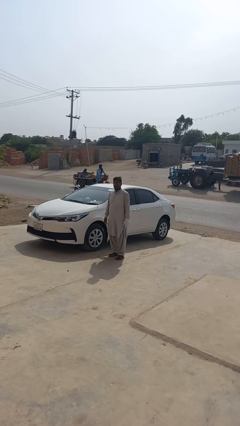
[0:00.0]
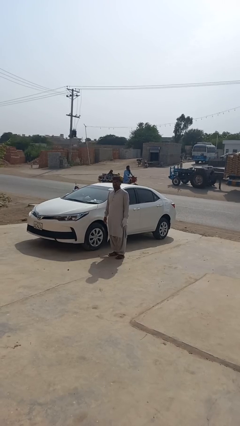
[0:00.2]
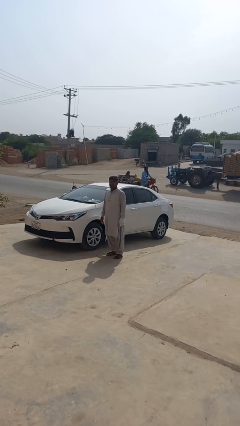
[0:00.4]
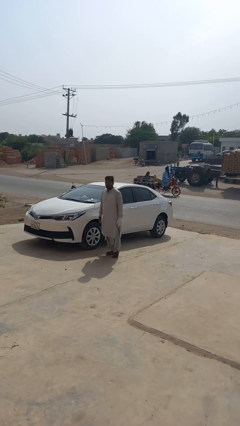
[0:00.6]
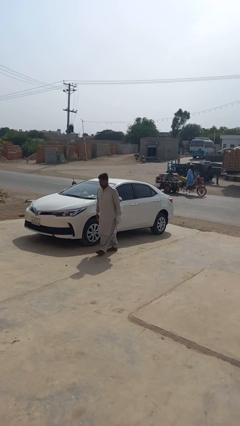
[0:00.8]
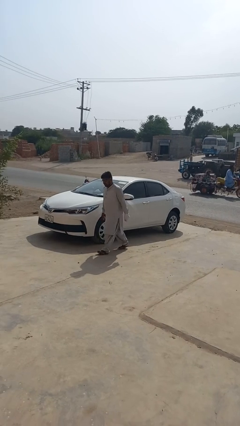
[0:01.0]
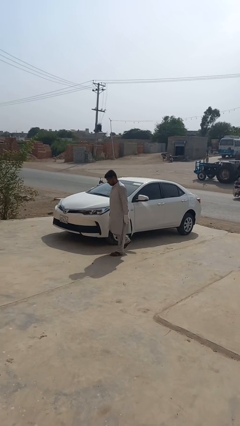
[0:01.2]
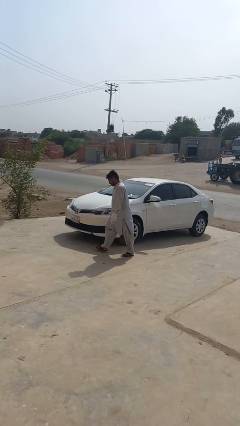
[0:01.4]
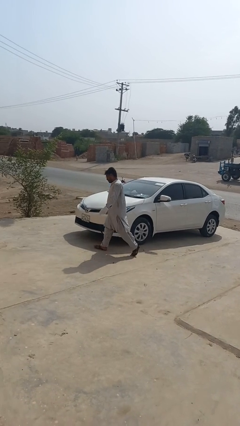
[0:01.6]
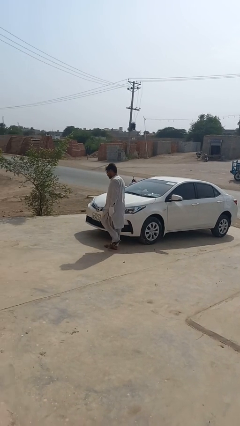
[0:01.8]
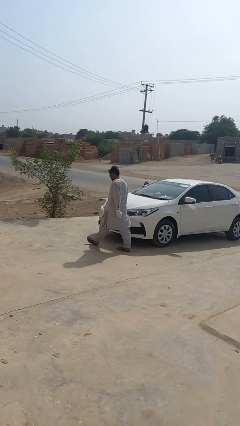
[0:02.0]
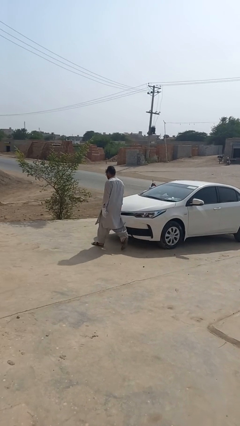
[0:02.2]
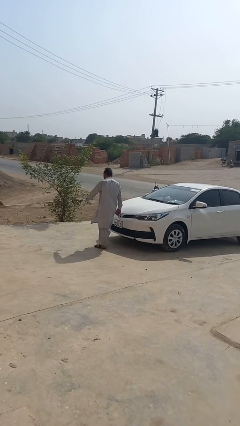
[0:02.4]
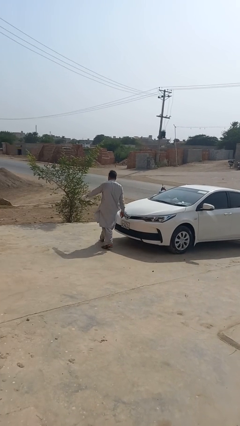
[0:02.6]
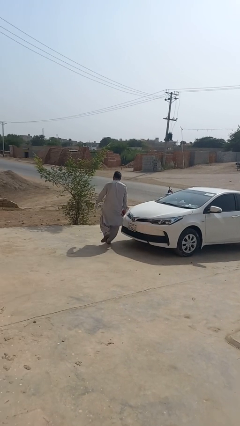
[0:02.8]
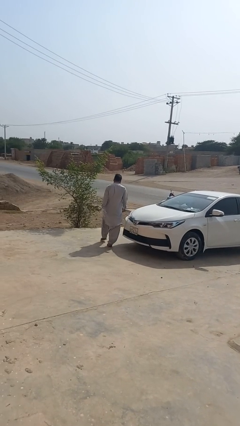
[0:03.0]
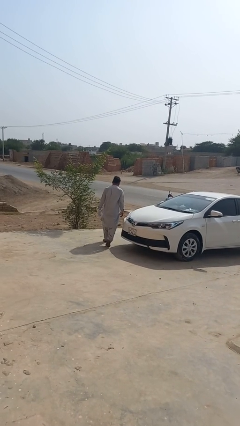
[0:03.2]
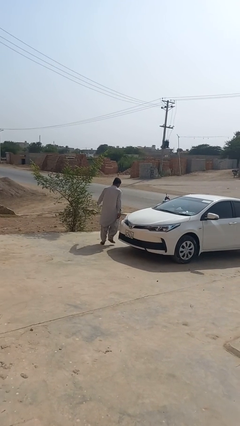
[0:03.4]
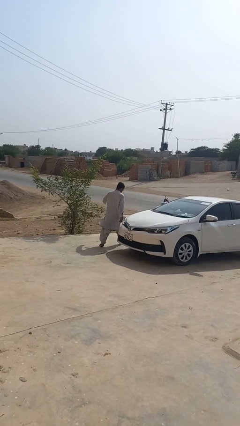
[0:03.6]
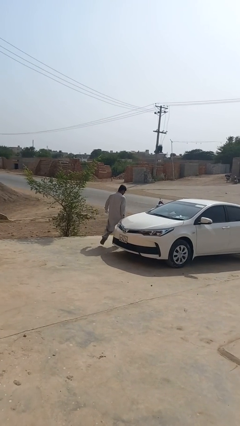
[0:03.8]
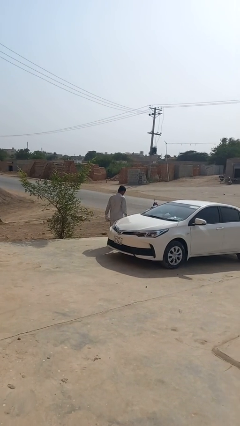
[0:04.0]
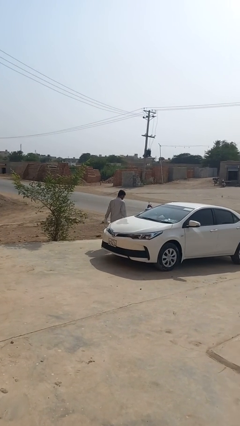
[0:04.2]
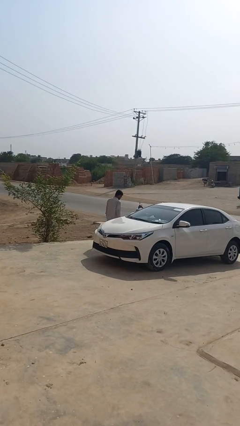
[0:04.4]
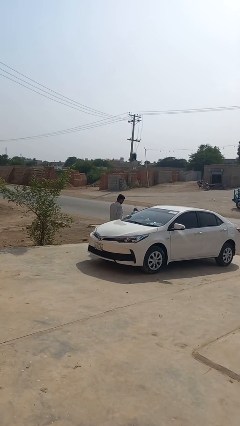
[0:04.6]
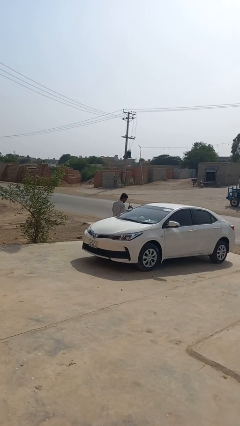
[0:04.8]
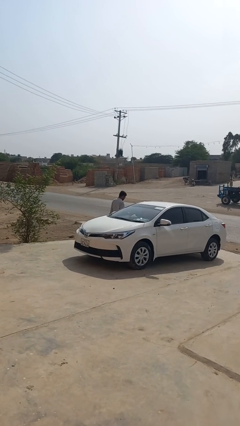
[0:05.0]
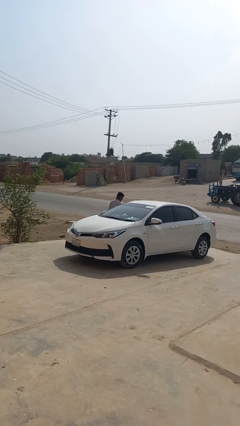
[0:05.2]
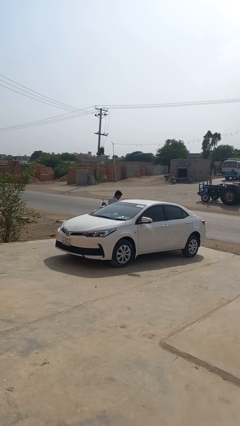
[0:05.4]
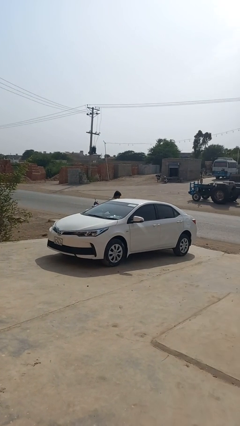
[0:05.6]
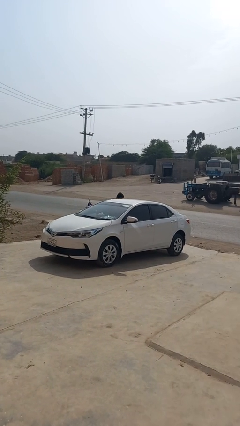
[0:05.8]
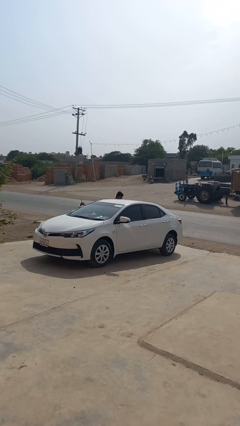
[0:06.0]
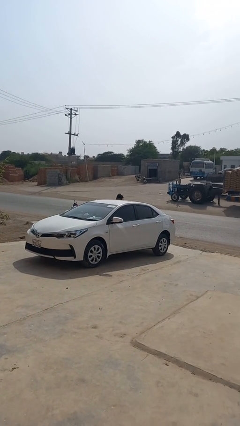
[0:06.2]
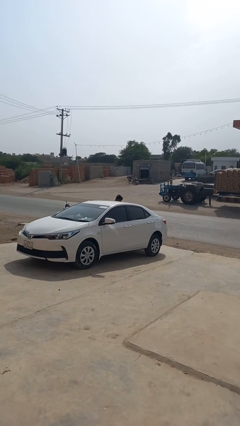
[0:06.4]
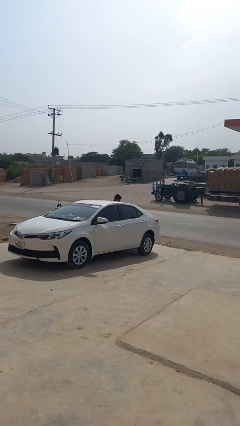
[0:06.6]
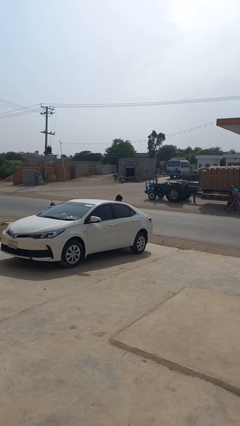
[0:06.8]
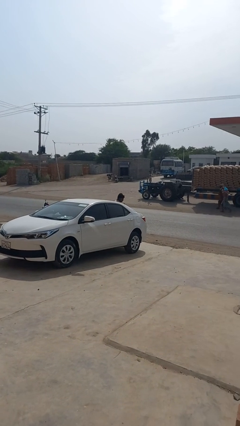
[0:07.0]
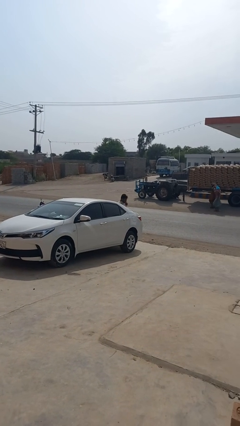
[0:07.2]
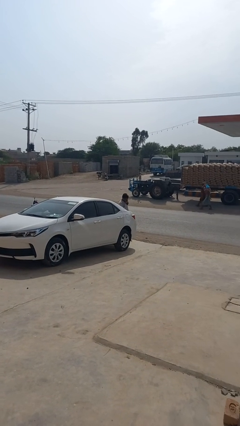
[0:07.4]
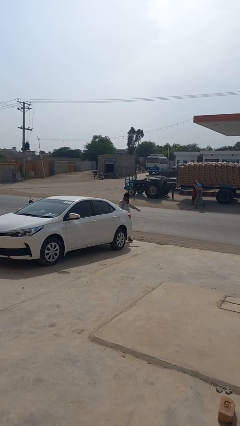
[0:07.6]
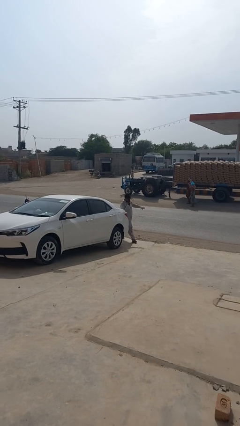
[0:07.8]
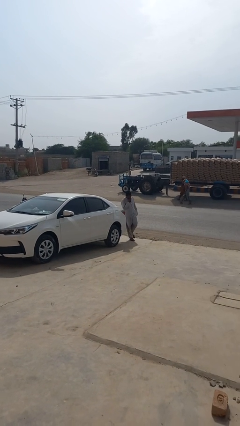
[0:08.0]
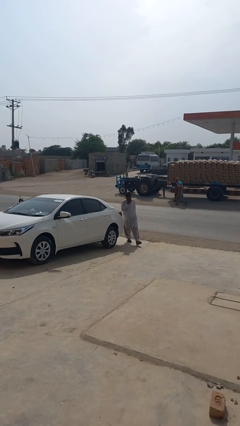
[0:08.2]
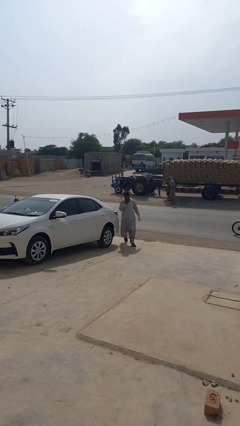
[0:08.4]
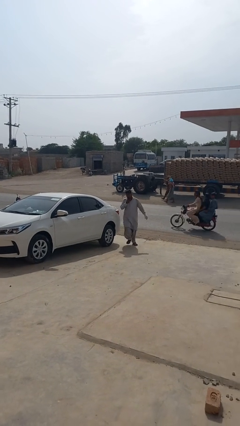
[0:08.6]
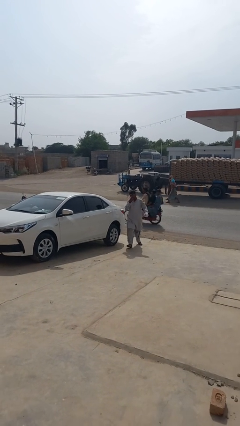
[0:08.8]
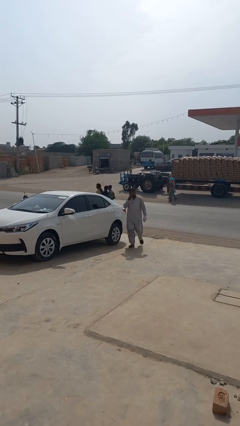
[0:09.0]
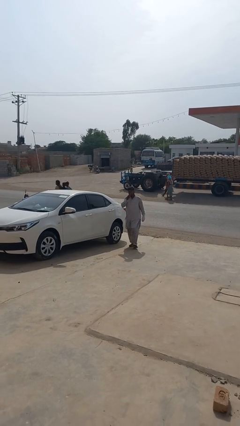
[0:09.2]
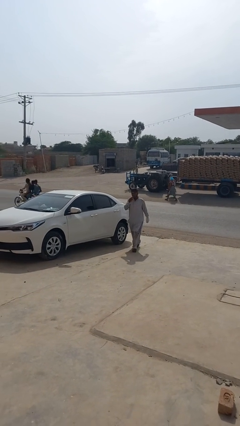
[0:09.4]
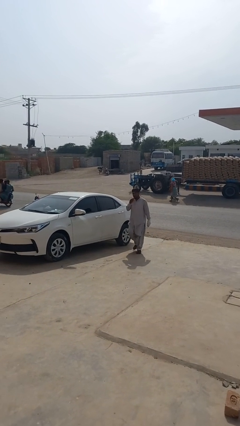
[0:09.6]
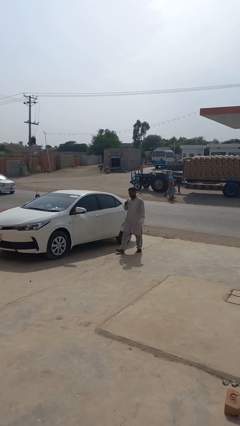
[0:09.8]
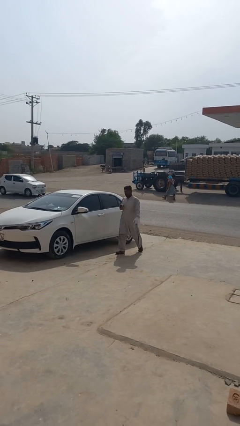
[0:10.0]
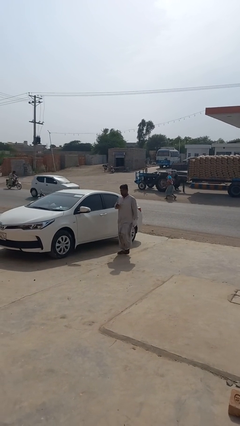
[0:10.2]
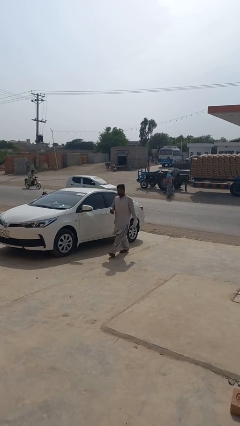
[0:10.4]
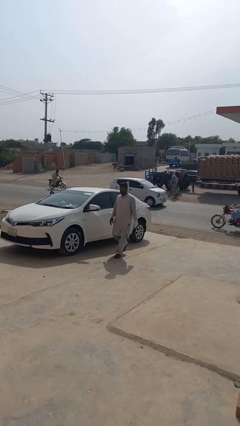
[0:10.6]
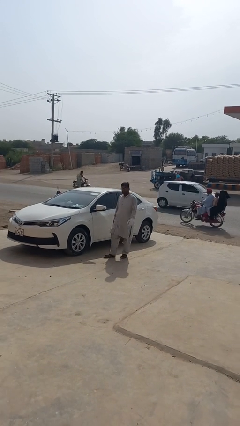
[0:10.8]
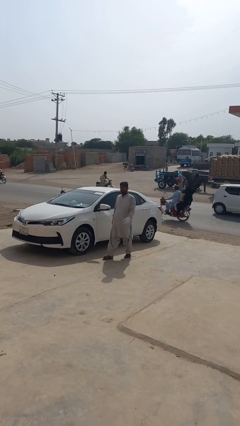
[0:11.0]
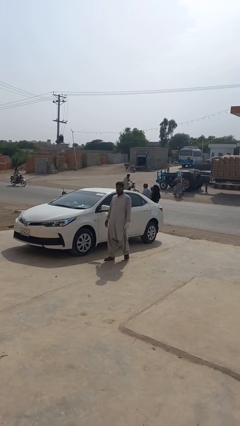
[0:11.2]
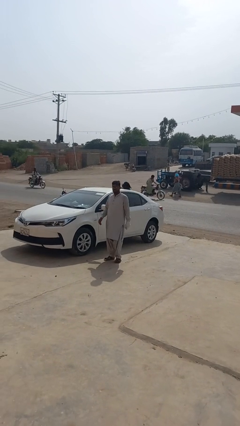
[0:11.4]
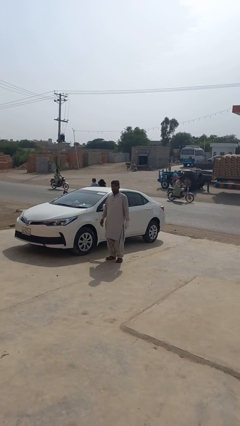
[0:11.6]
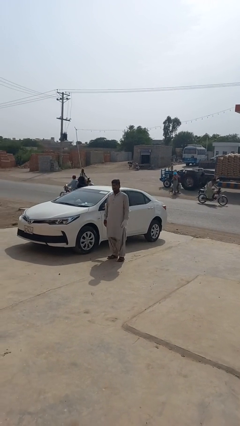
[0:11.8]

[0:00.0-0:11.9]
person walks around car

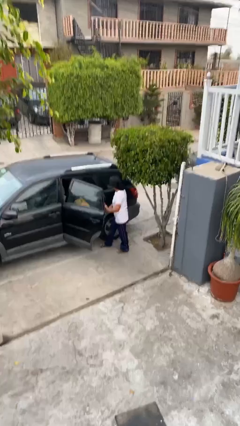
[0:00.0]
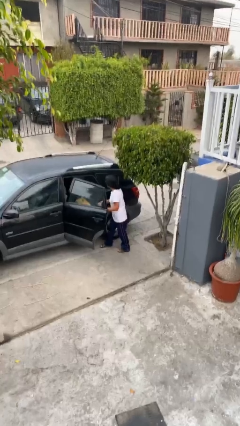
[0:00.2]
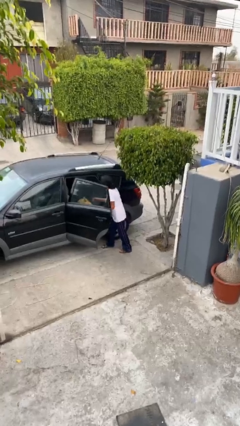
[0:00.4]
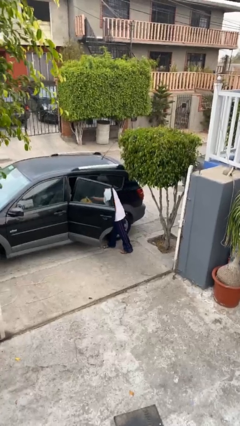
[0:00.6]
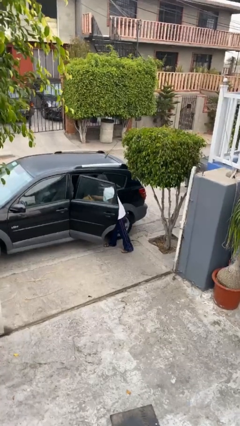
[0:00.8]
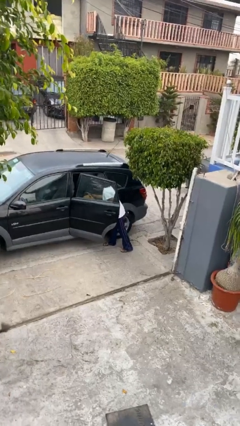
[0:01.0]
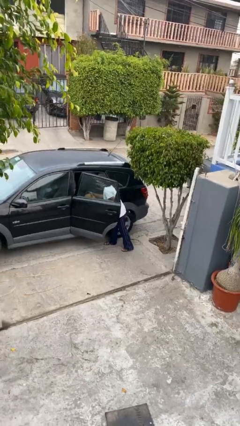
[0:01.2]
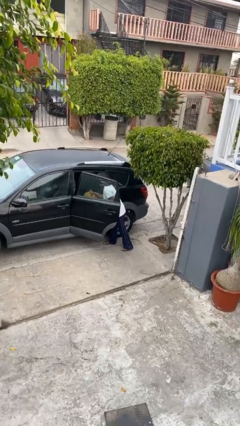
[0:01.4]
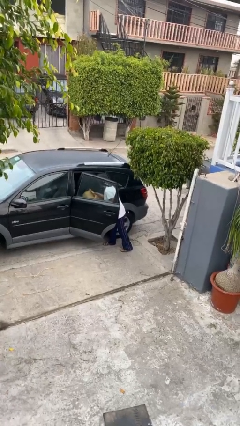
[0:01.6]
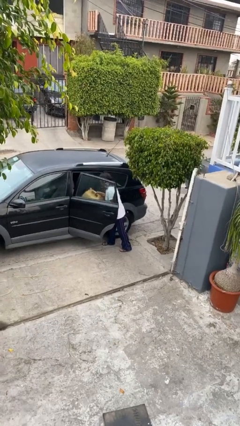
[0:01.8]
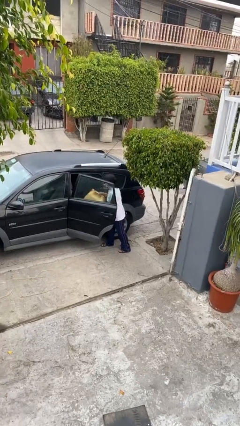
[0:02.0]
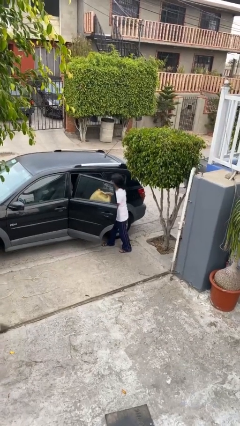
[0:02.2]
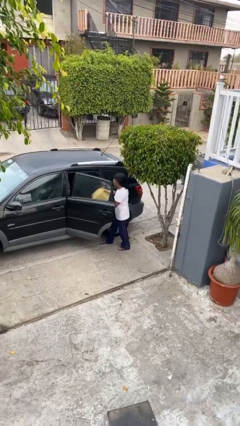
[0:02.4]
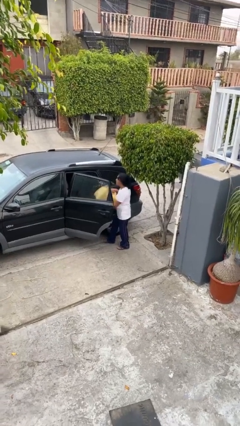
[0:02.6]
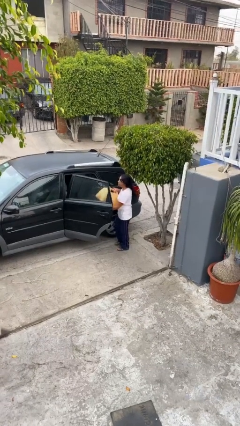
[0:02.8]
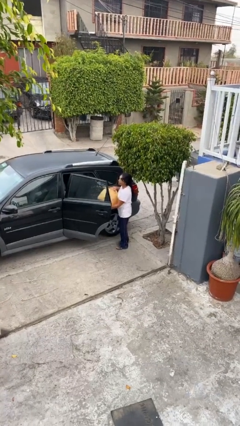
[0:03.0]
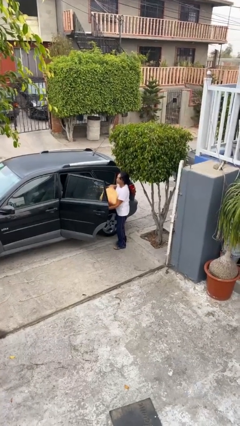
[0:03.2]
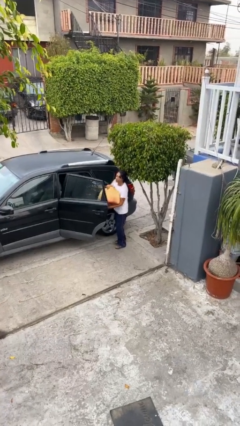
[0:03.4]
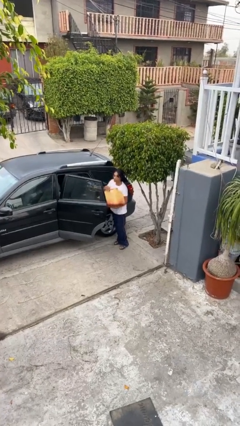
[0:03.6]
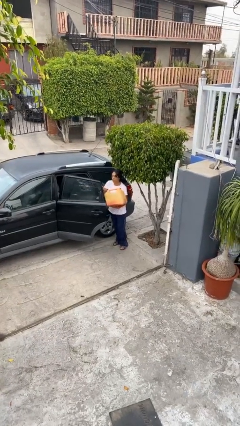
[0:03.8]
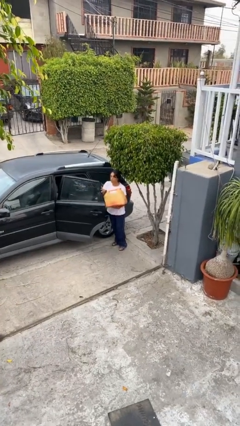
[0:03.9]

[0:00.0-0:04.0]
person unloads car

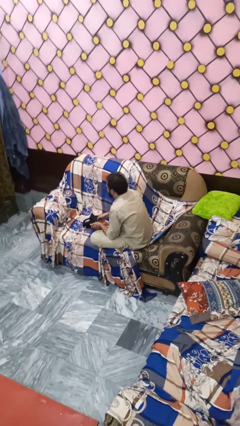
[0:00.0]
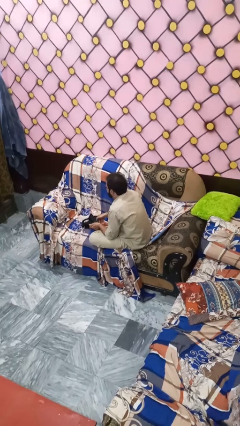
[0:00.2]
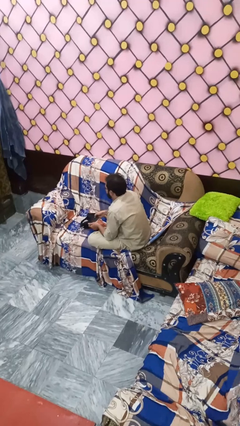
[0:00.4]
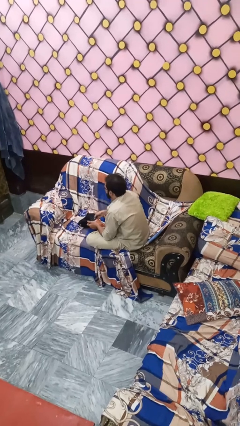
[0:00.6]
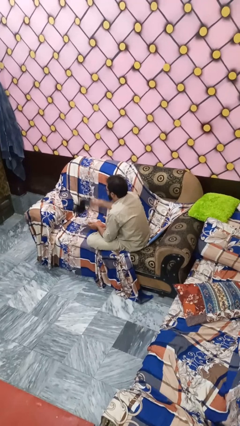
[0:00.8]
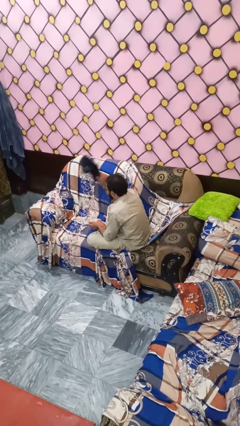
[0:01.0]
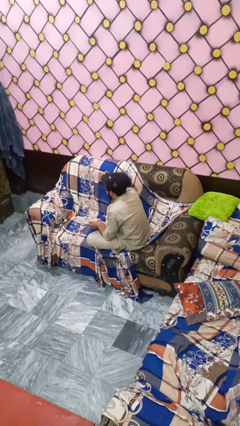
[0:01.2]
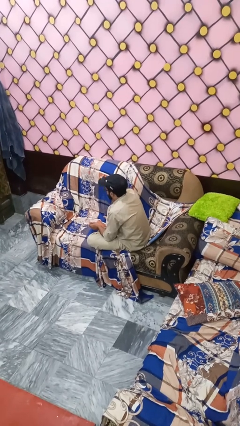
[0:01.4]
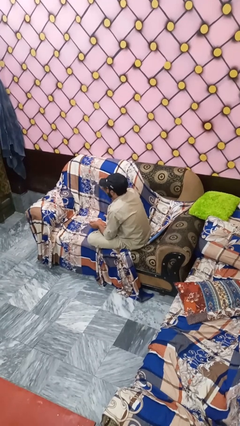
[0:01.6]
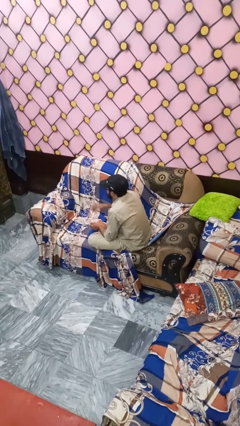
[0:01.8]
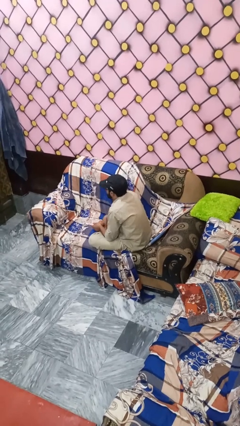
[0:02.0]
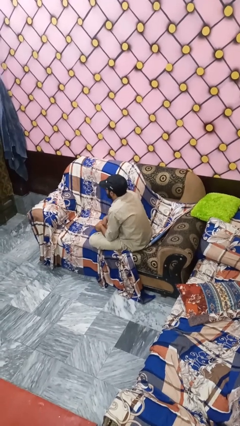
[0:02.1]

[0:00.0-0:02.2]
person holds object above head
